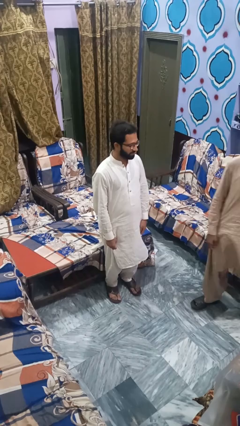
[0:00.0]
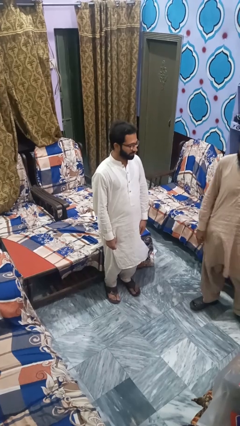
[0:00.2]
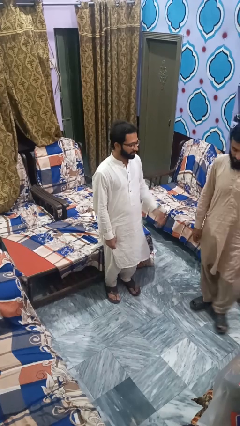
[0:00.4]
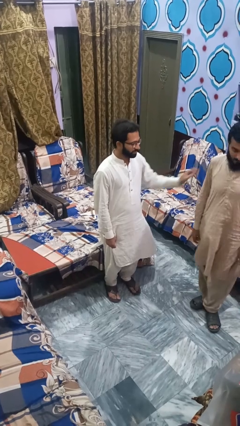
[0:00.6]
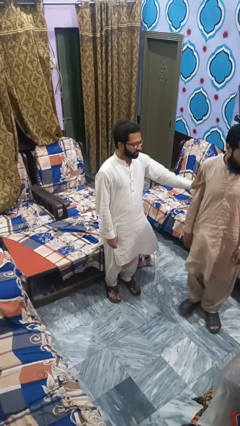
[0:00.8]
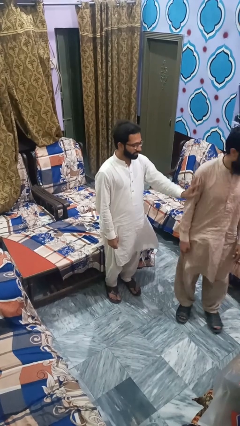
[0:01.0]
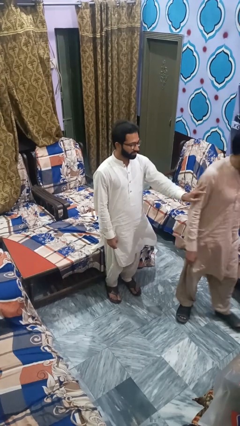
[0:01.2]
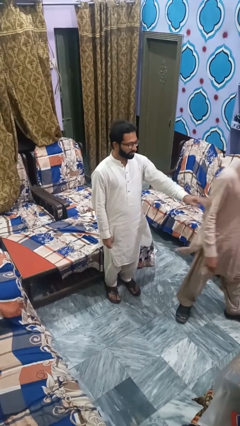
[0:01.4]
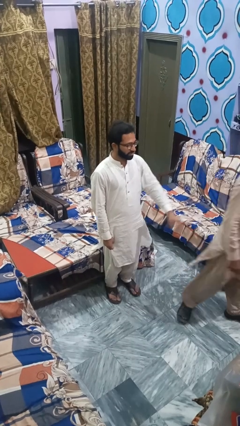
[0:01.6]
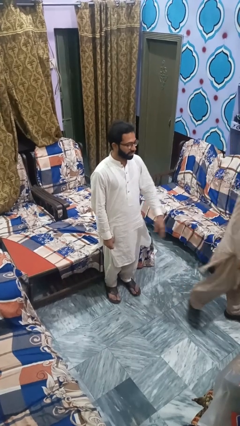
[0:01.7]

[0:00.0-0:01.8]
person shoves person

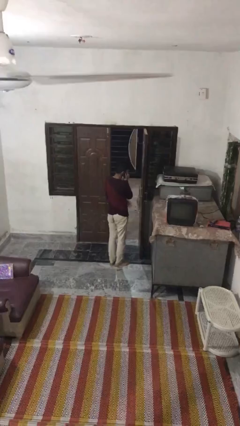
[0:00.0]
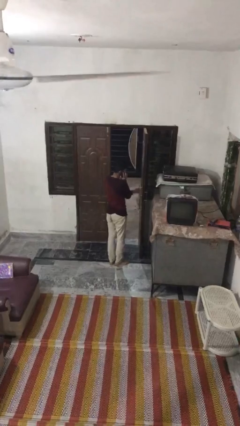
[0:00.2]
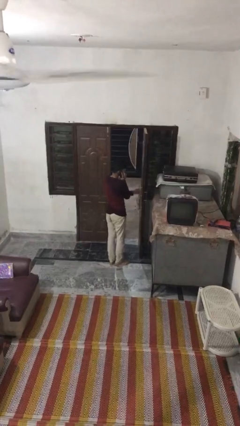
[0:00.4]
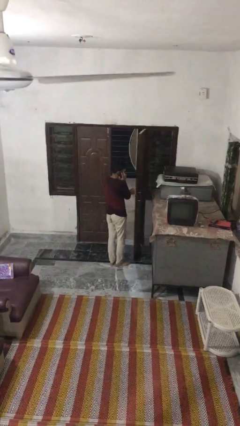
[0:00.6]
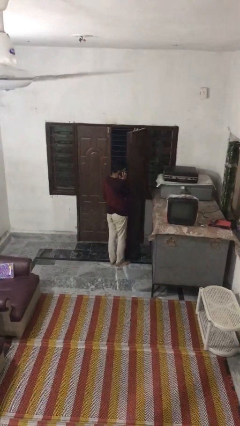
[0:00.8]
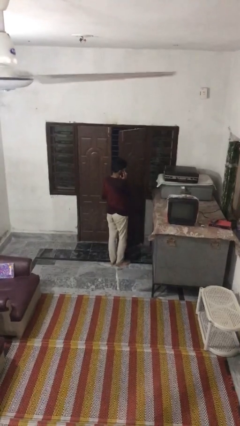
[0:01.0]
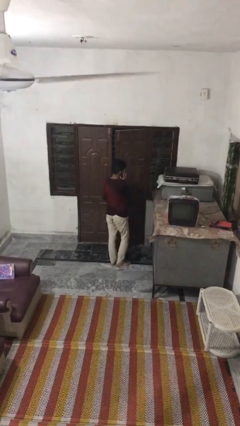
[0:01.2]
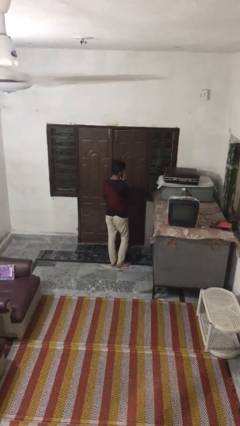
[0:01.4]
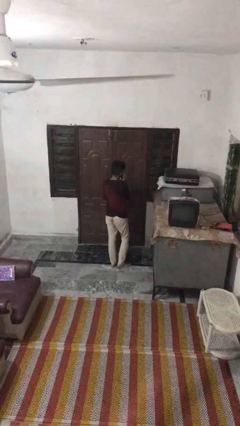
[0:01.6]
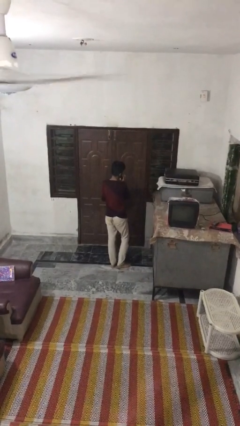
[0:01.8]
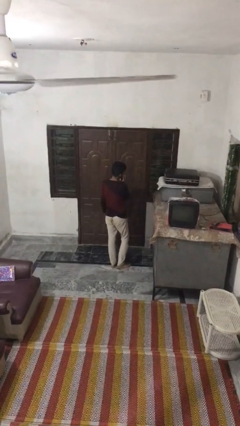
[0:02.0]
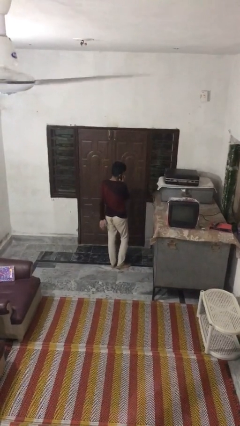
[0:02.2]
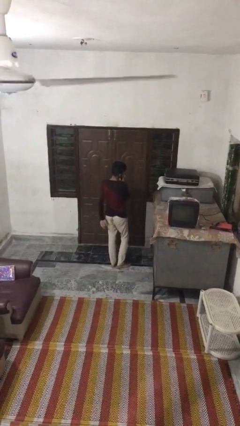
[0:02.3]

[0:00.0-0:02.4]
person closes facility door

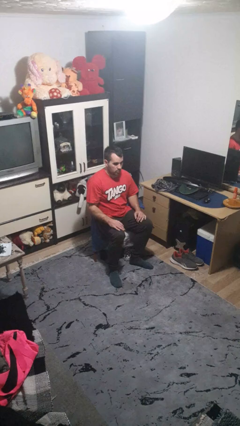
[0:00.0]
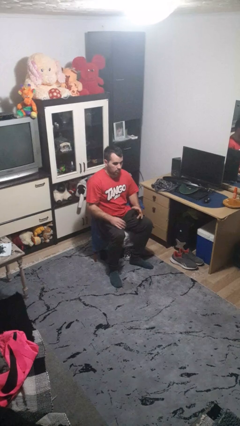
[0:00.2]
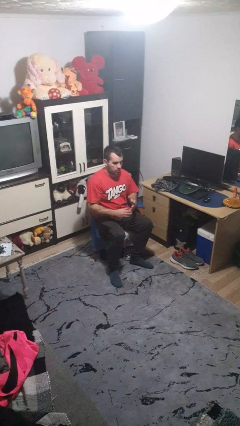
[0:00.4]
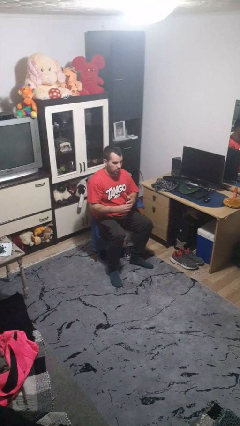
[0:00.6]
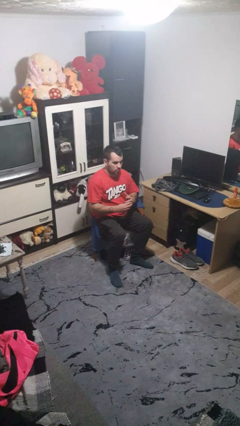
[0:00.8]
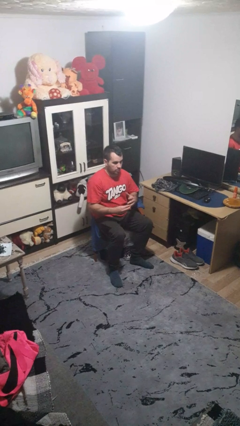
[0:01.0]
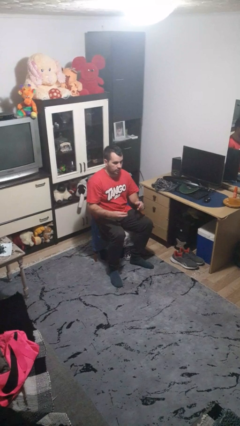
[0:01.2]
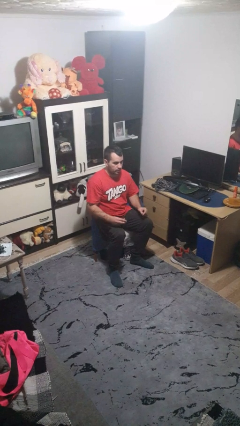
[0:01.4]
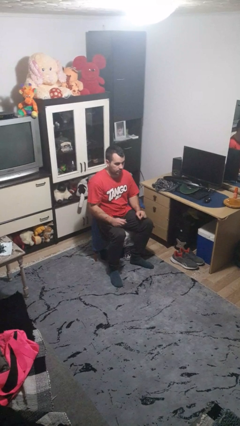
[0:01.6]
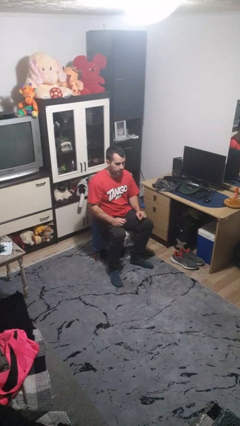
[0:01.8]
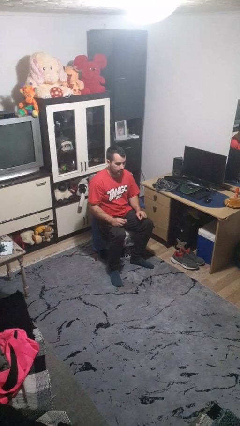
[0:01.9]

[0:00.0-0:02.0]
person takes off ring

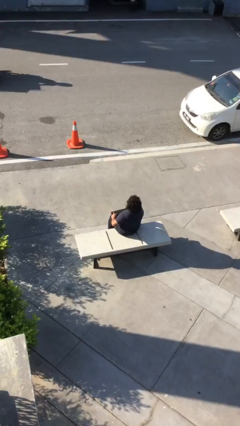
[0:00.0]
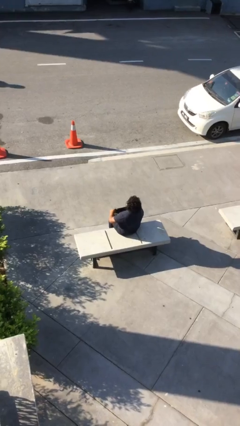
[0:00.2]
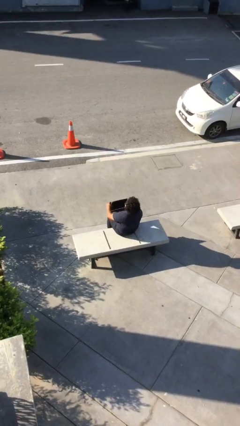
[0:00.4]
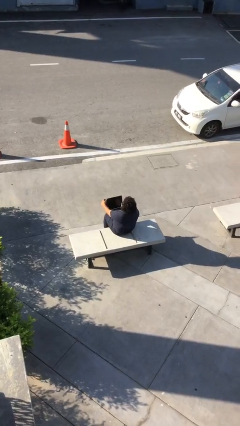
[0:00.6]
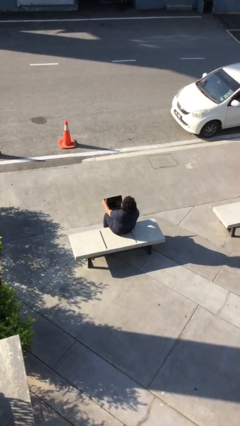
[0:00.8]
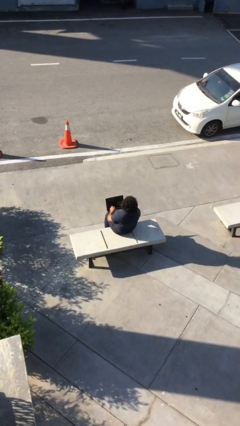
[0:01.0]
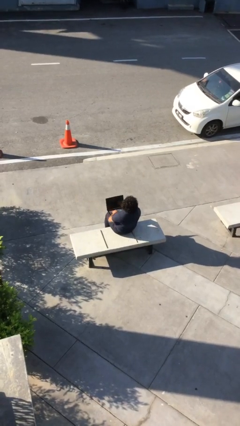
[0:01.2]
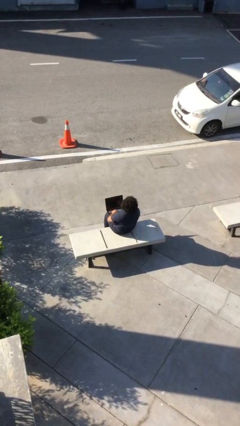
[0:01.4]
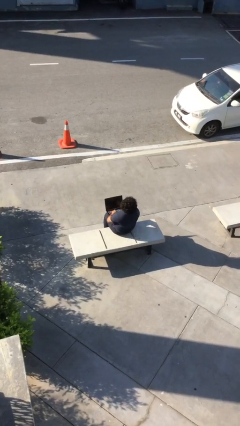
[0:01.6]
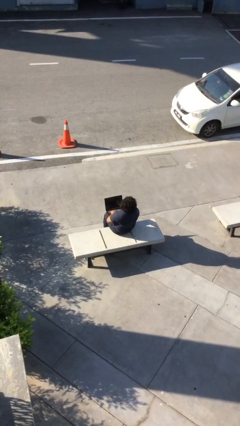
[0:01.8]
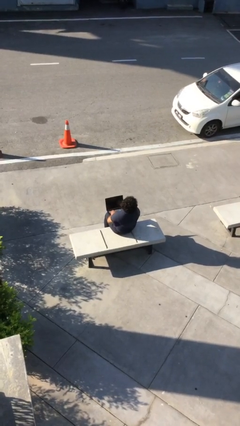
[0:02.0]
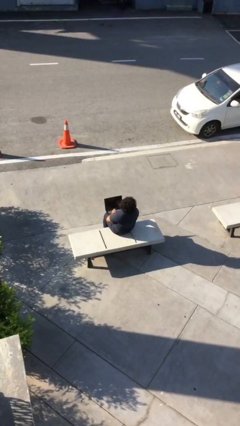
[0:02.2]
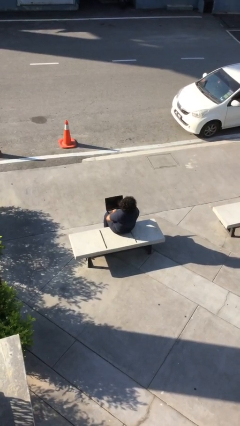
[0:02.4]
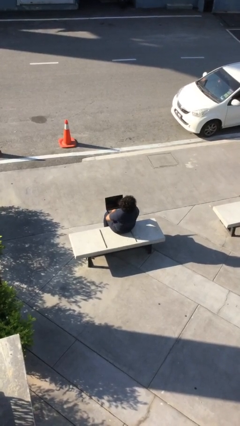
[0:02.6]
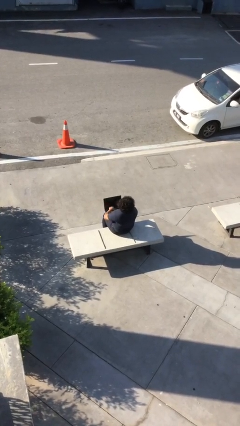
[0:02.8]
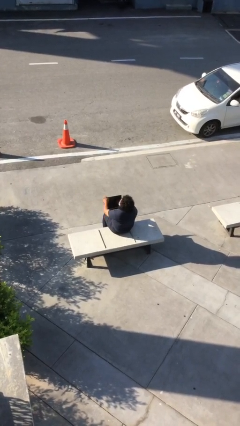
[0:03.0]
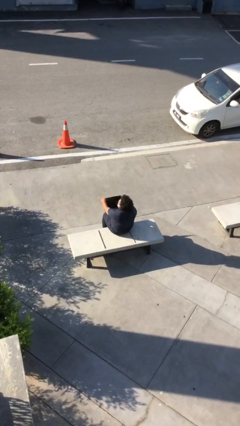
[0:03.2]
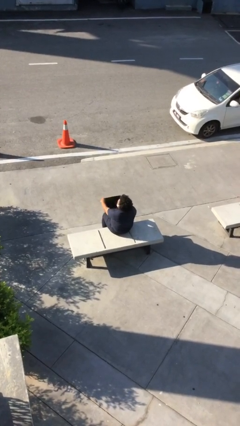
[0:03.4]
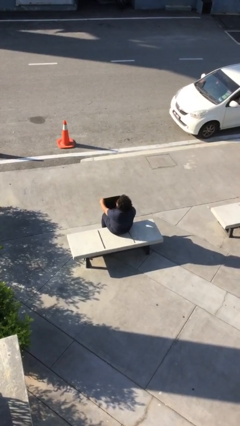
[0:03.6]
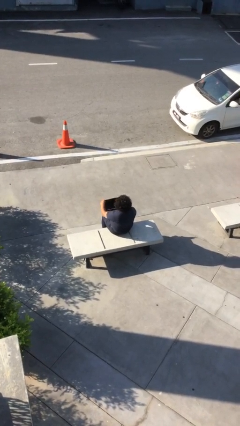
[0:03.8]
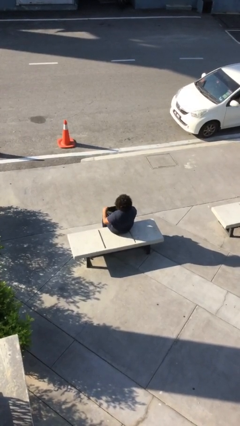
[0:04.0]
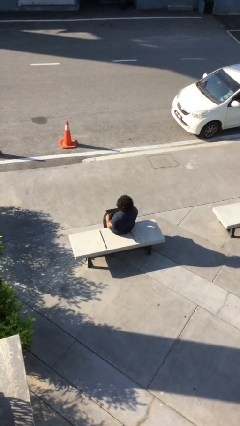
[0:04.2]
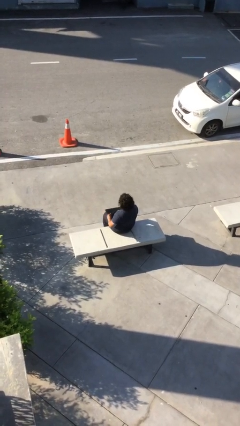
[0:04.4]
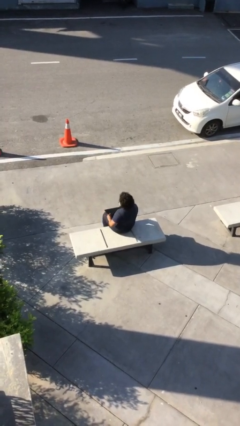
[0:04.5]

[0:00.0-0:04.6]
person interacts with laptop

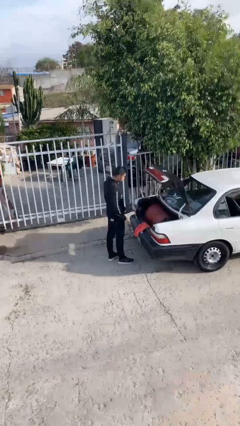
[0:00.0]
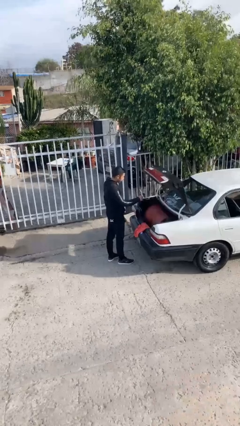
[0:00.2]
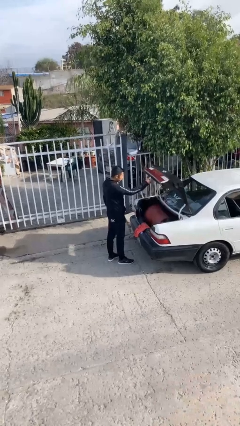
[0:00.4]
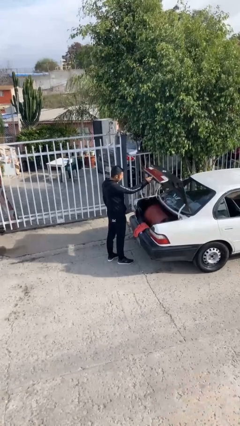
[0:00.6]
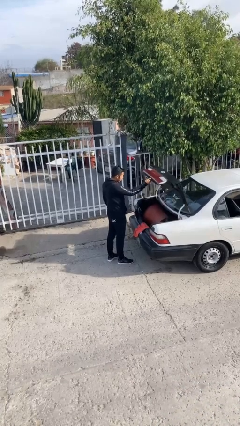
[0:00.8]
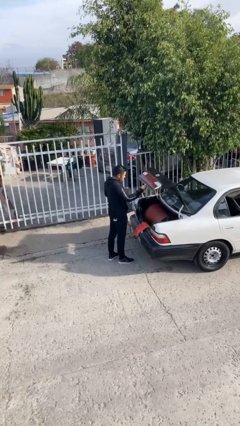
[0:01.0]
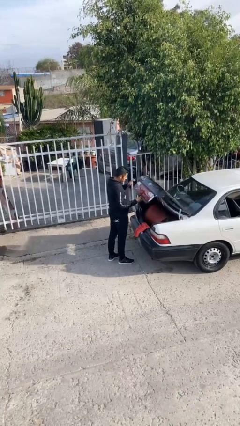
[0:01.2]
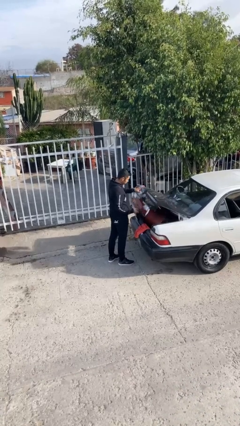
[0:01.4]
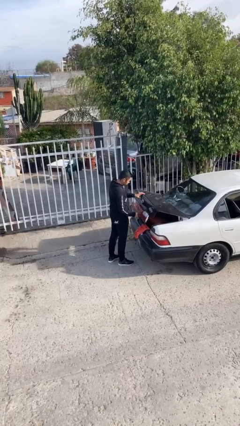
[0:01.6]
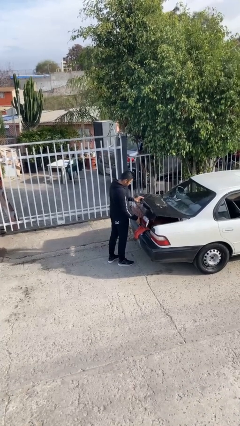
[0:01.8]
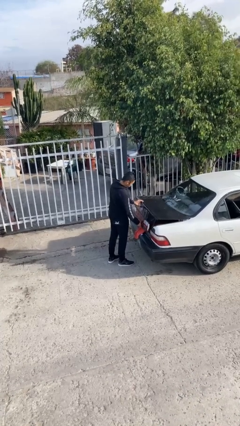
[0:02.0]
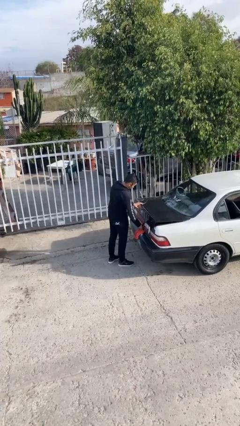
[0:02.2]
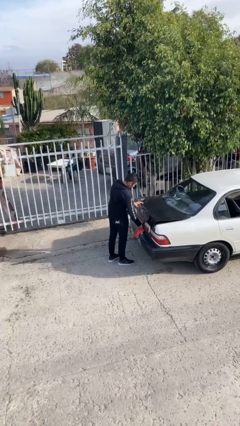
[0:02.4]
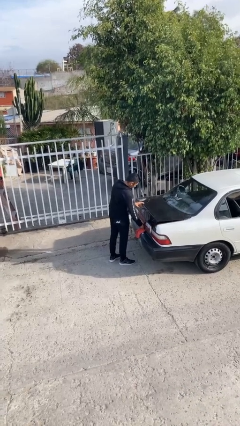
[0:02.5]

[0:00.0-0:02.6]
person opens car trunk

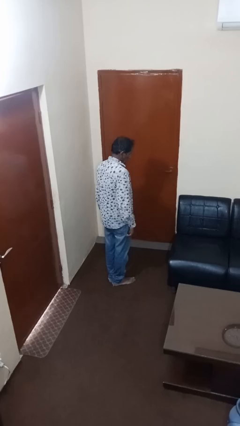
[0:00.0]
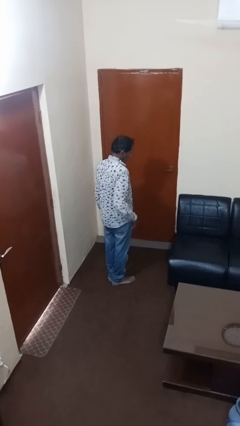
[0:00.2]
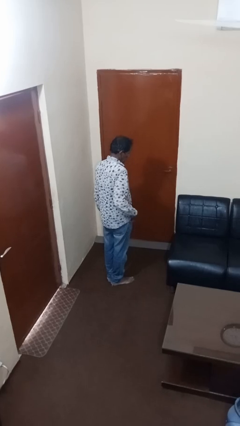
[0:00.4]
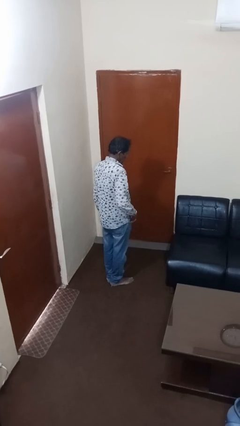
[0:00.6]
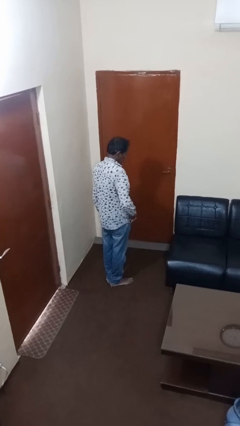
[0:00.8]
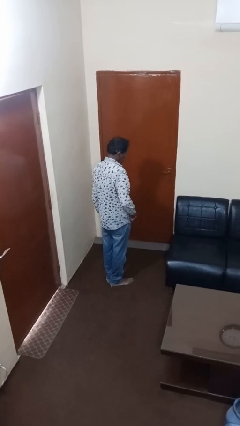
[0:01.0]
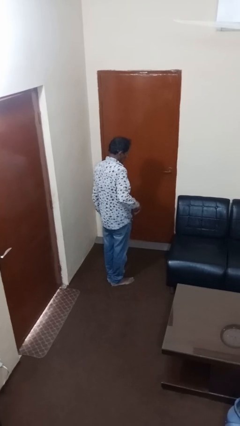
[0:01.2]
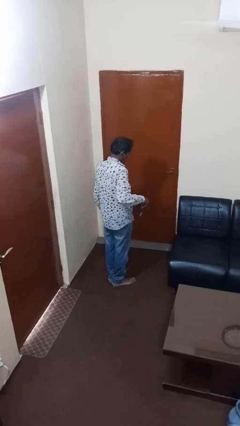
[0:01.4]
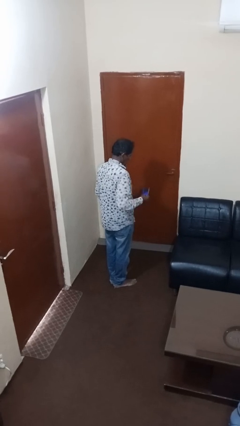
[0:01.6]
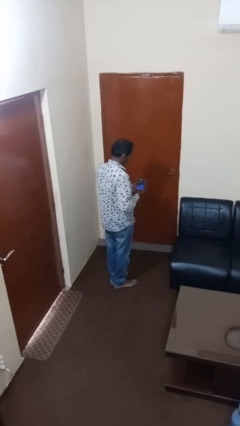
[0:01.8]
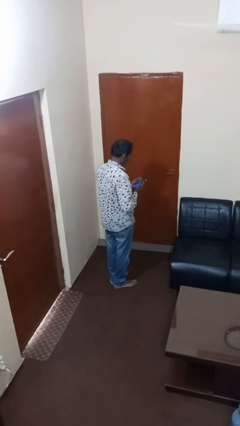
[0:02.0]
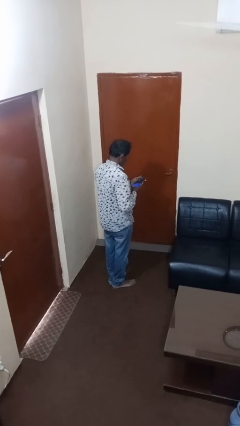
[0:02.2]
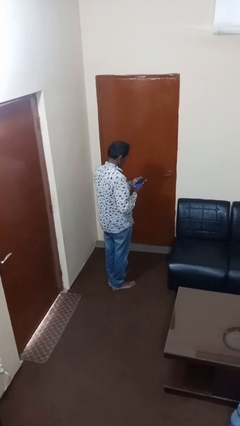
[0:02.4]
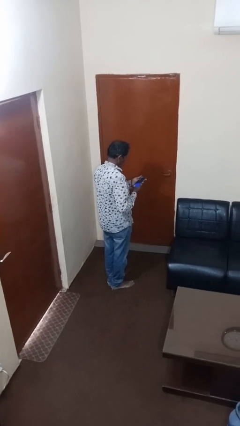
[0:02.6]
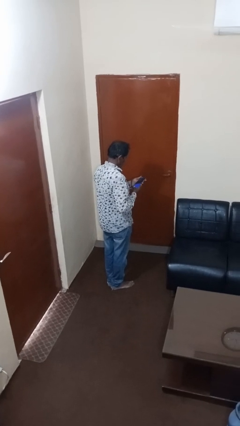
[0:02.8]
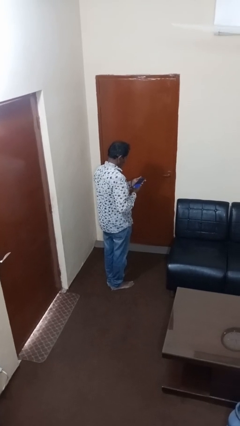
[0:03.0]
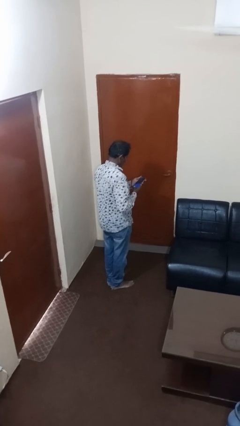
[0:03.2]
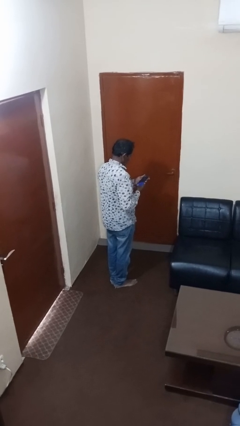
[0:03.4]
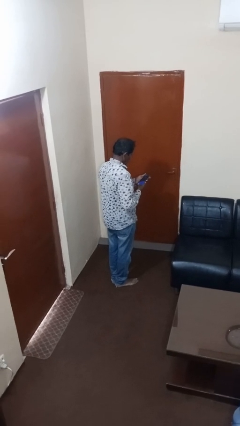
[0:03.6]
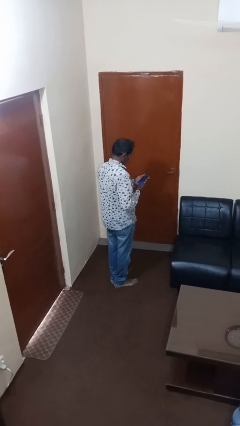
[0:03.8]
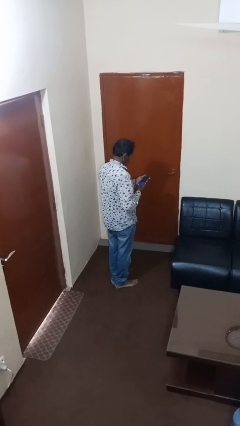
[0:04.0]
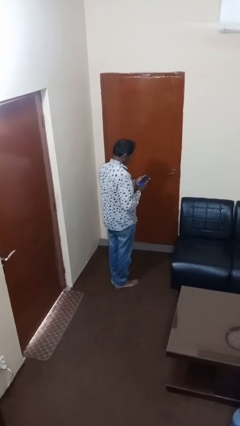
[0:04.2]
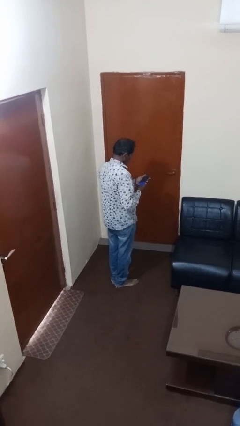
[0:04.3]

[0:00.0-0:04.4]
person takes phone from pocket
